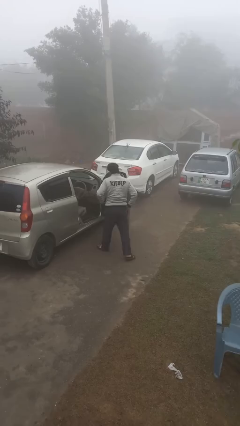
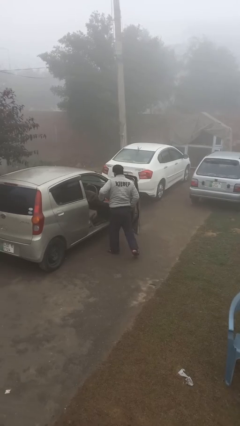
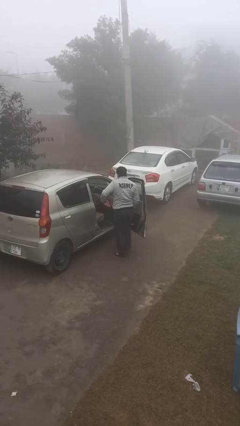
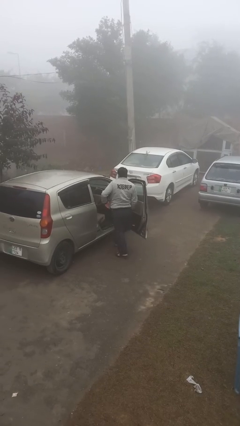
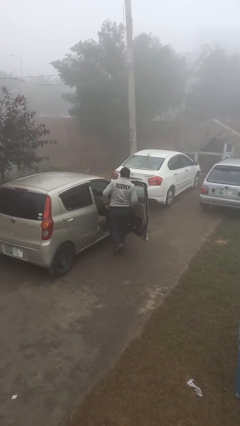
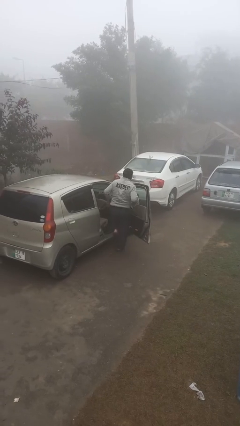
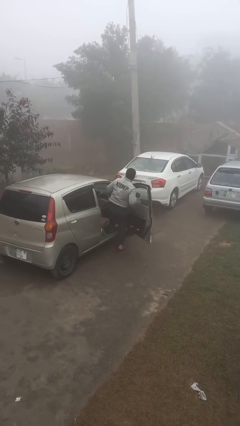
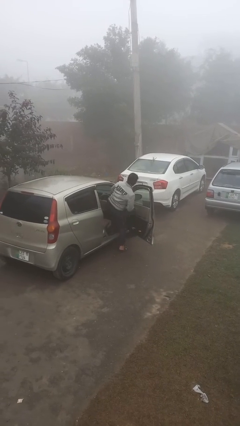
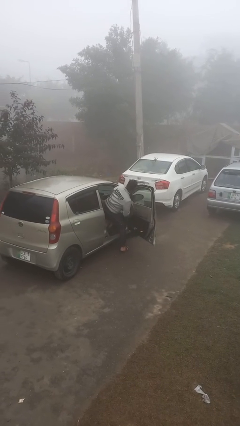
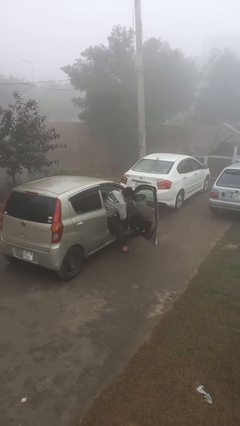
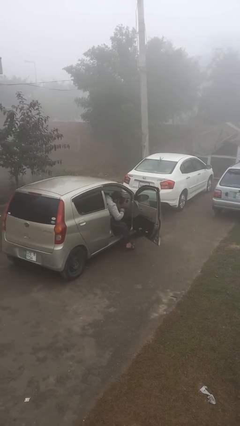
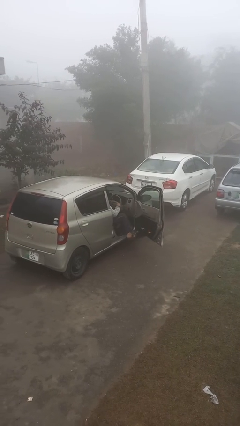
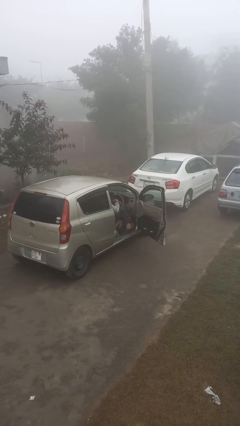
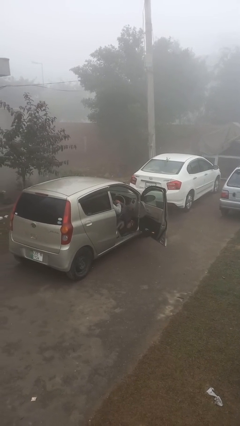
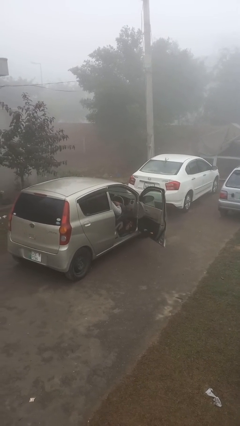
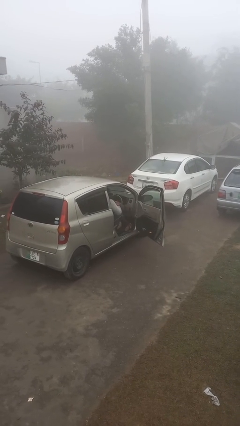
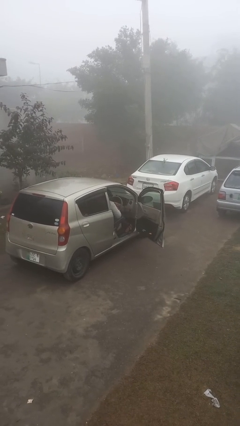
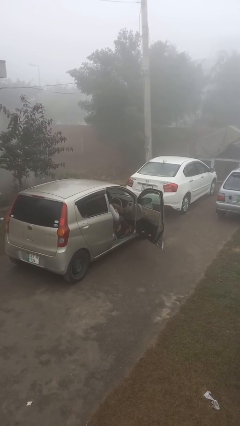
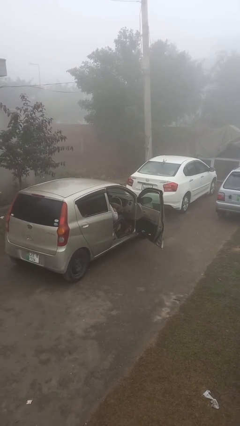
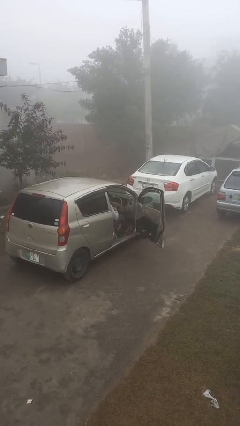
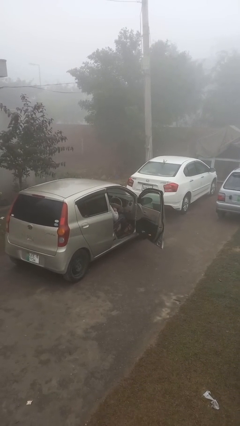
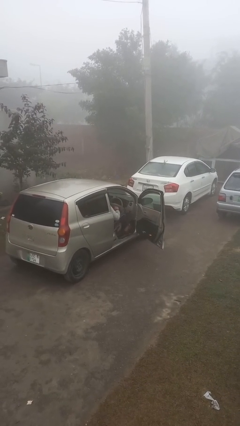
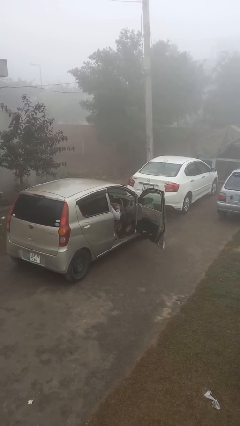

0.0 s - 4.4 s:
person enters car

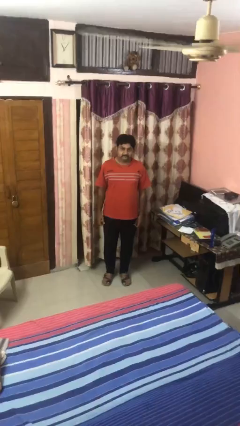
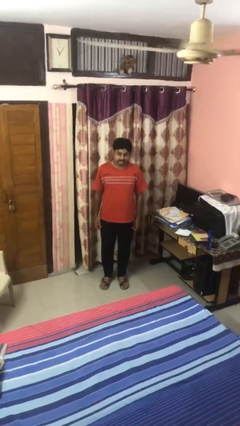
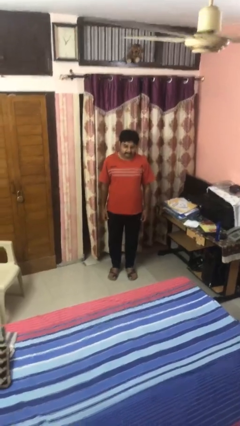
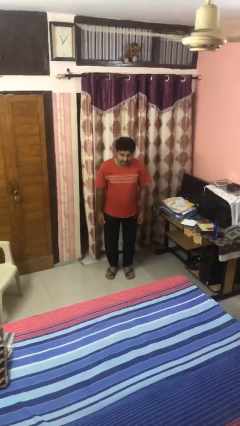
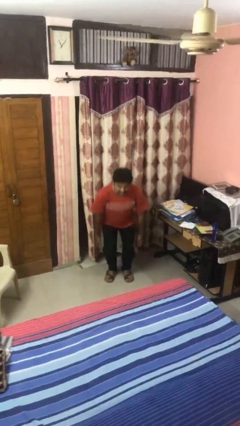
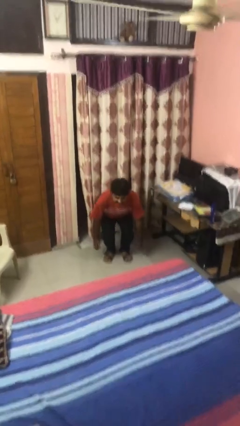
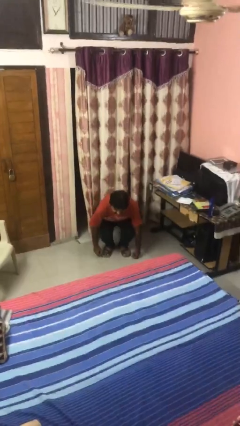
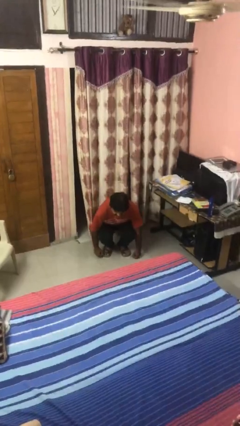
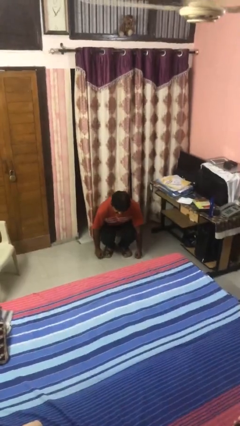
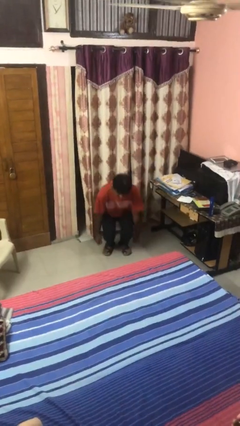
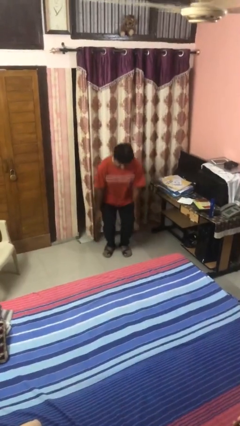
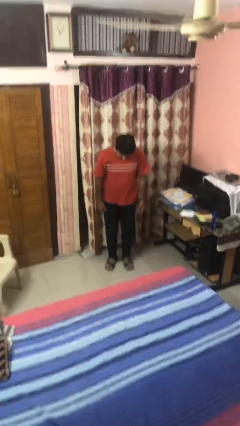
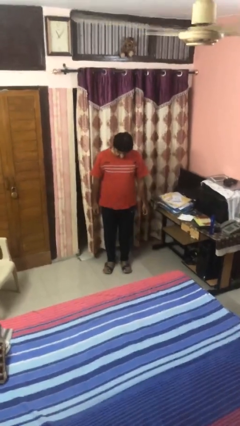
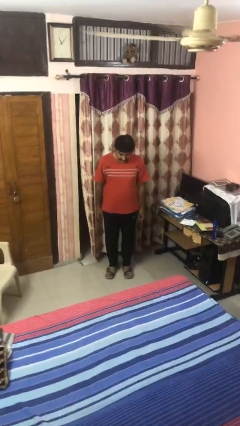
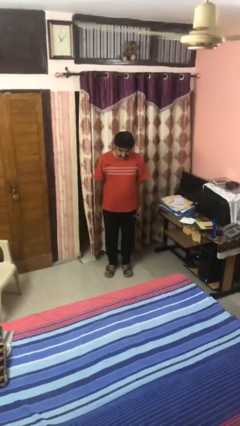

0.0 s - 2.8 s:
person squats

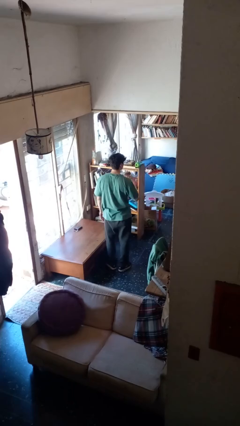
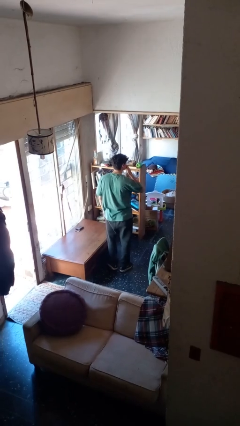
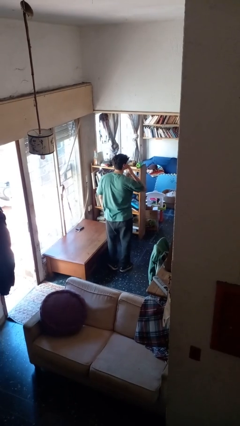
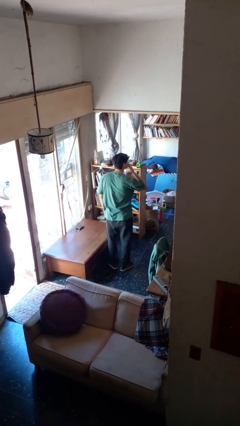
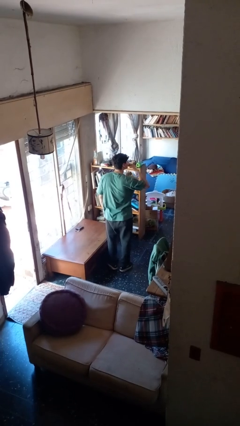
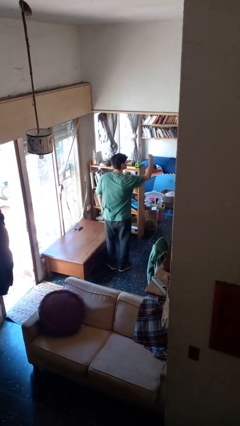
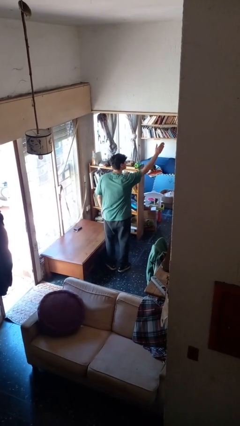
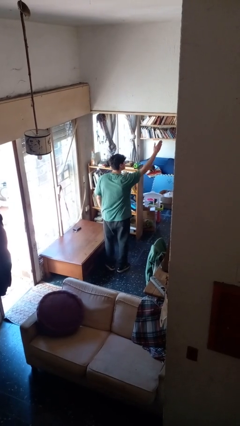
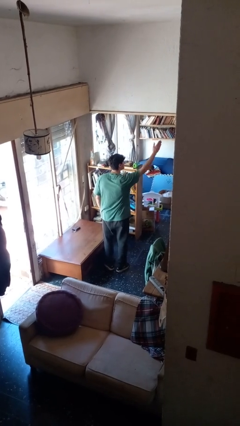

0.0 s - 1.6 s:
person gestures blow kiss

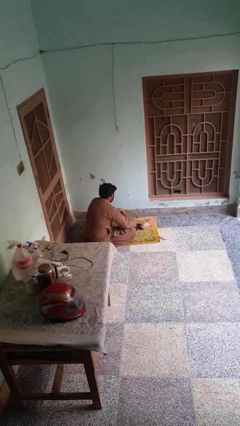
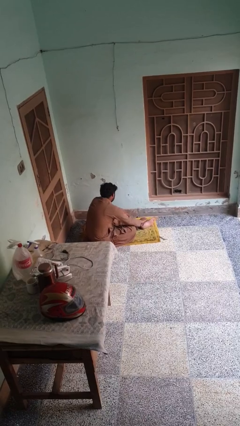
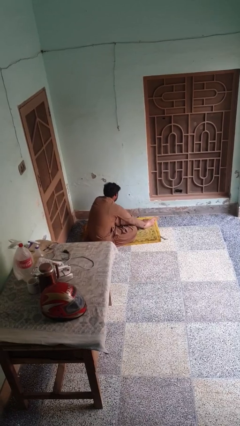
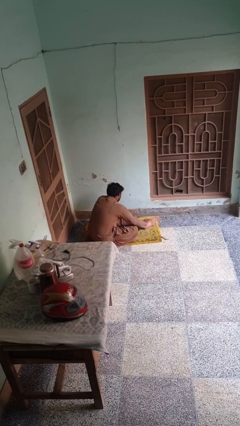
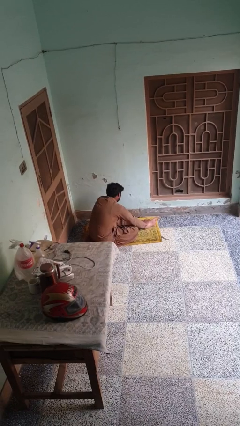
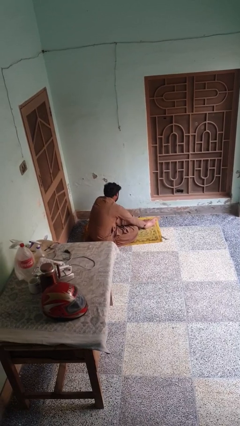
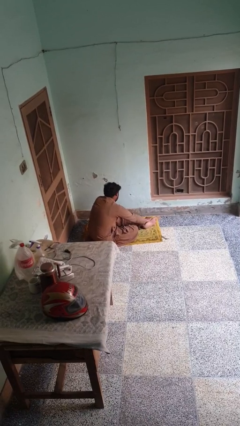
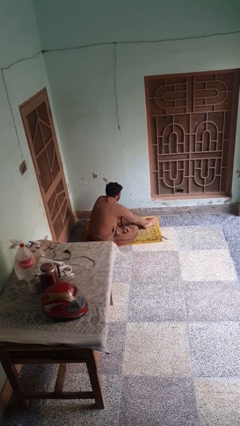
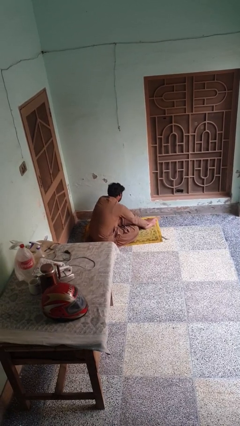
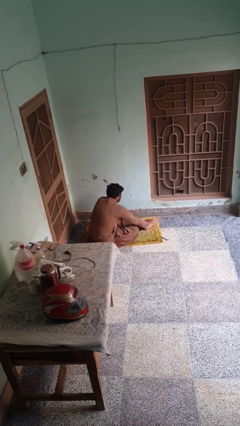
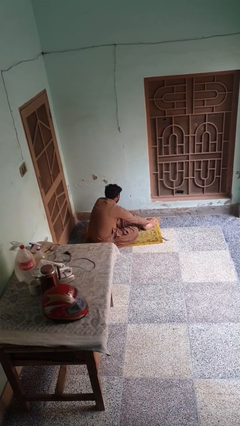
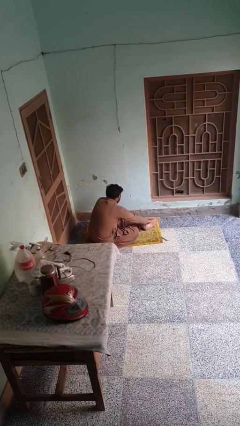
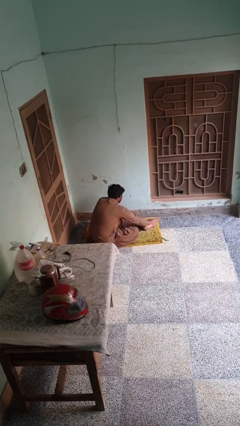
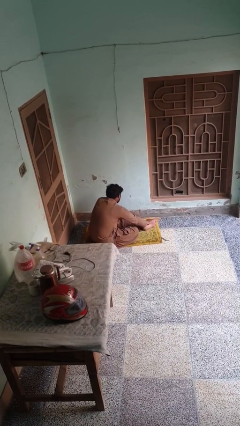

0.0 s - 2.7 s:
person rubs foot

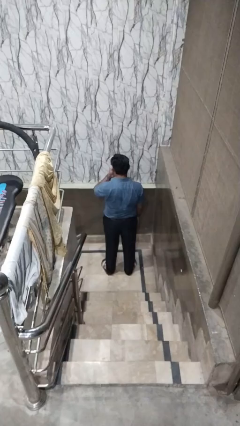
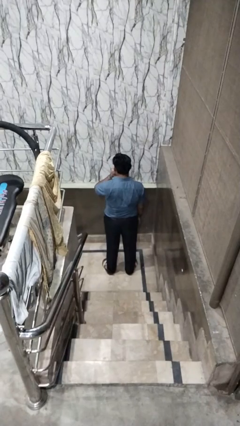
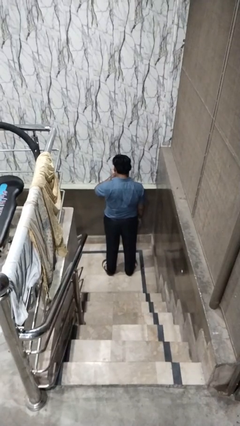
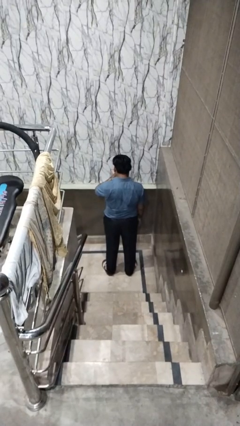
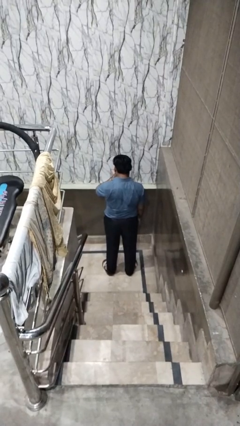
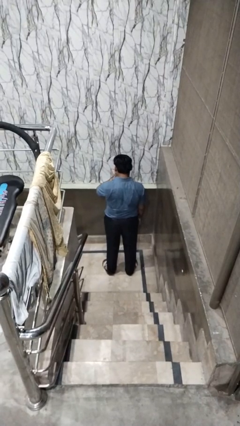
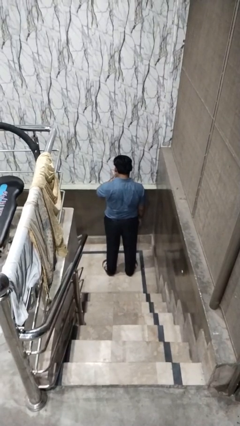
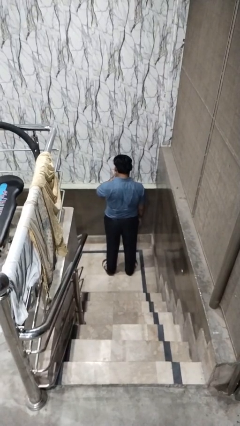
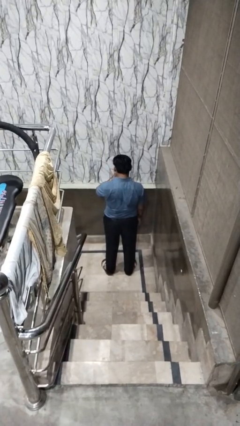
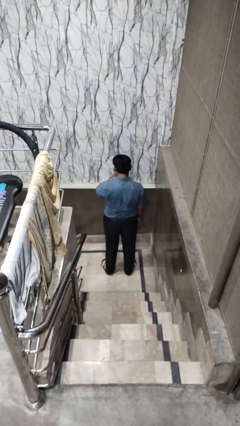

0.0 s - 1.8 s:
person blows nose

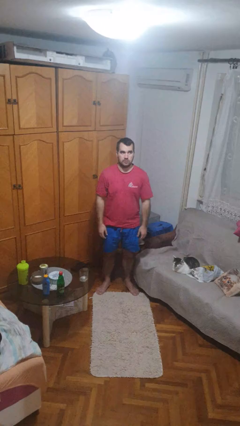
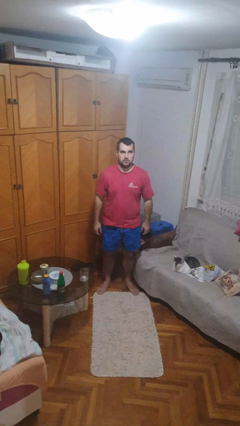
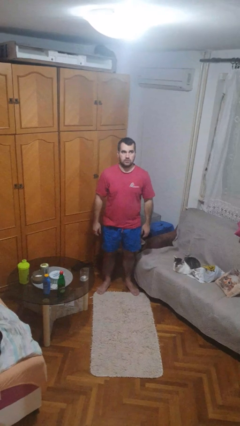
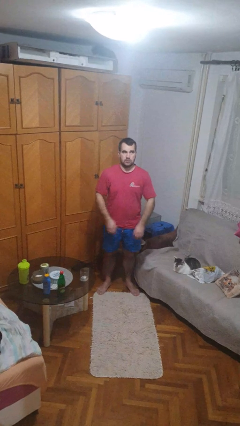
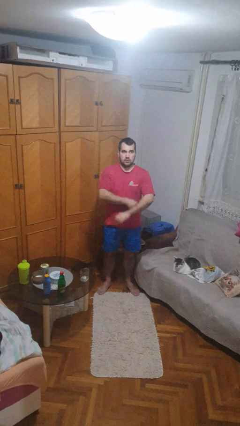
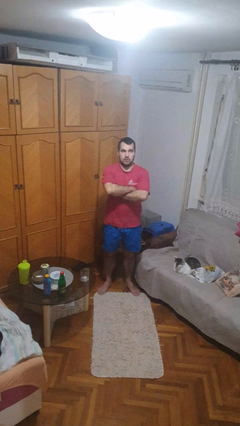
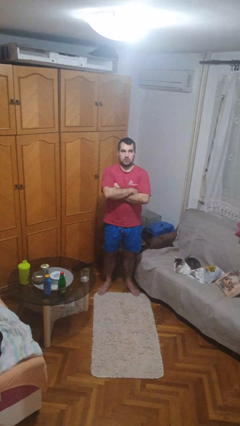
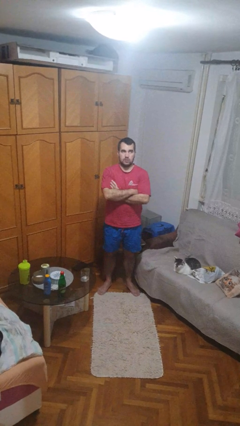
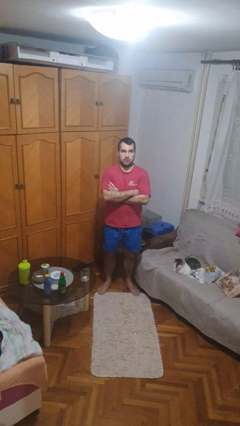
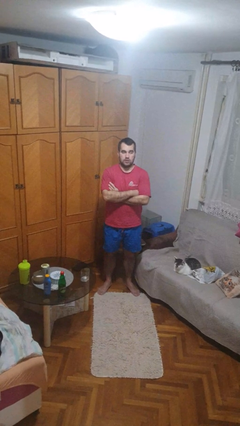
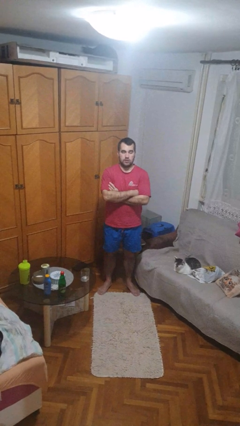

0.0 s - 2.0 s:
person crosses arms

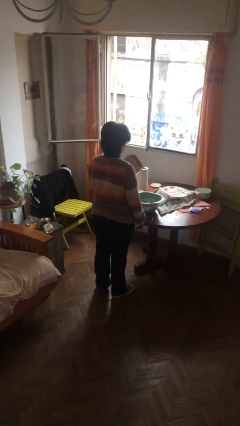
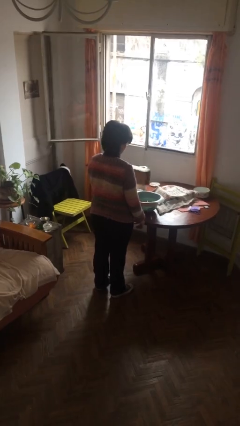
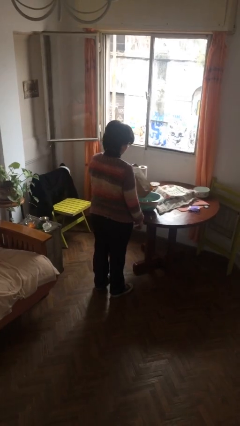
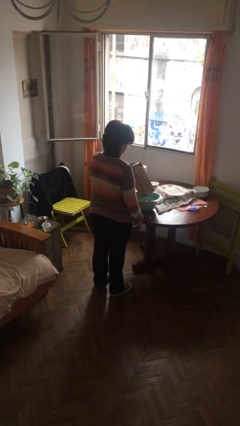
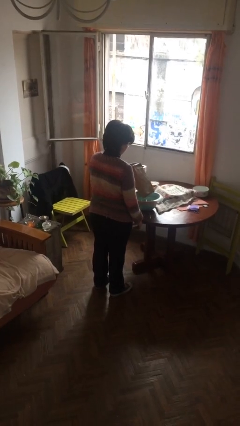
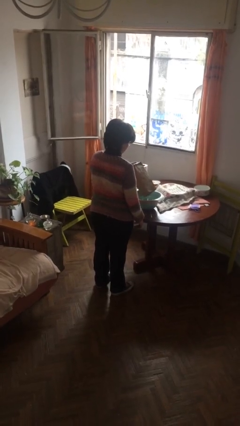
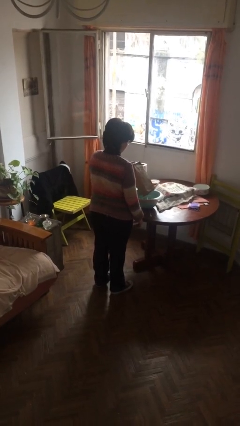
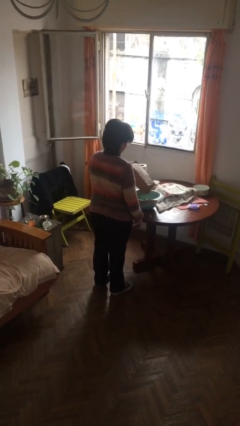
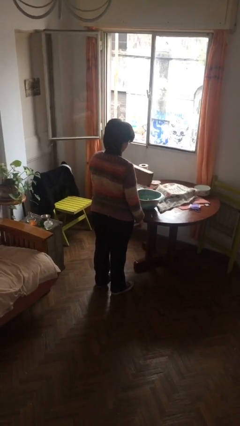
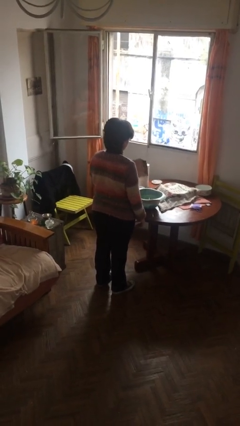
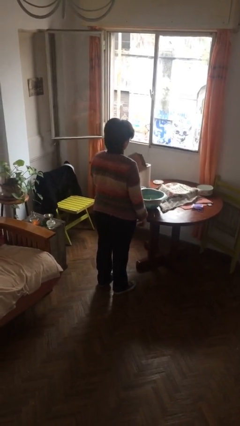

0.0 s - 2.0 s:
person pours into bowl

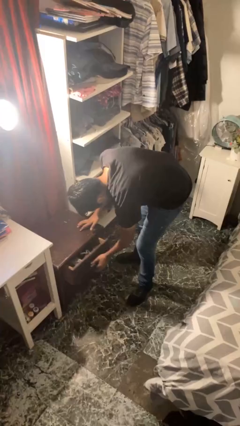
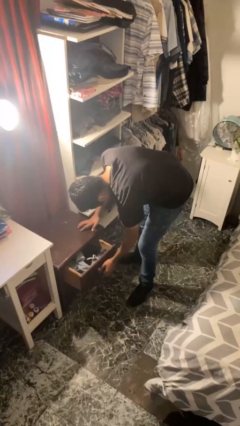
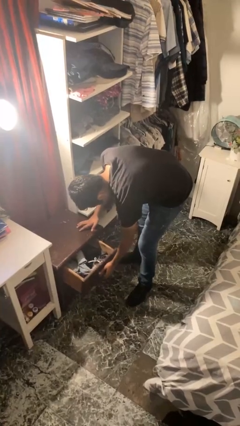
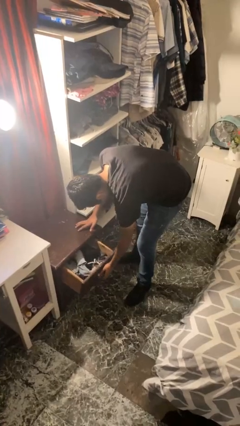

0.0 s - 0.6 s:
person opens dresser drawer
